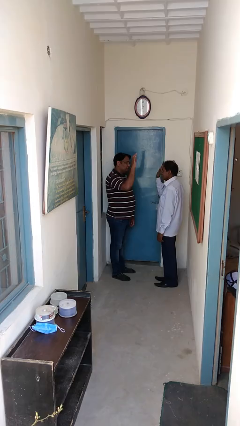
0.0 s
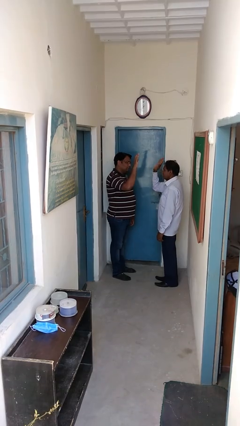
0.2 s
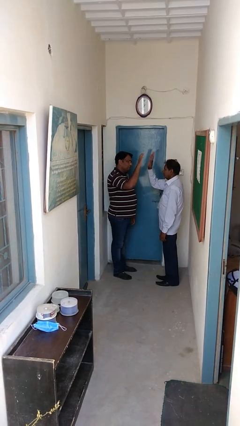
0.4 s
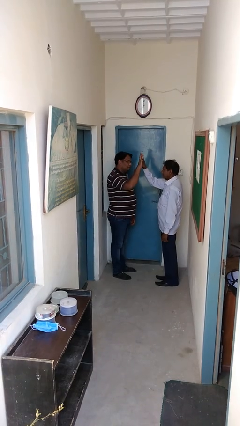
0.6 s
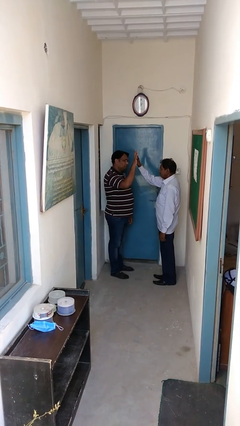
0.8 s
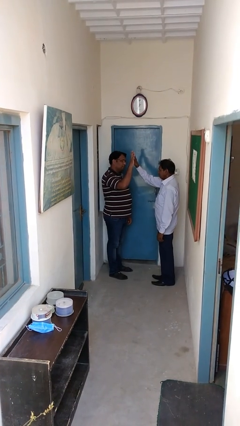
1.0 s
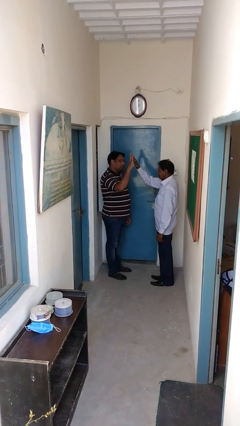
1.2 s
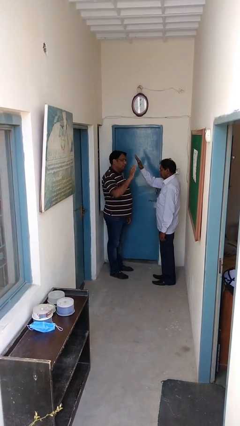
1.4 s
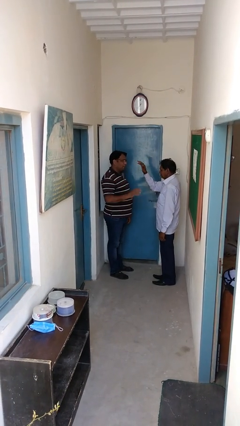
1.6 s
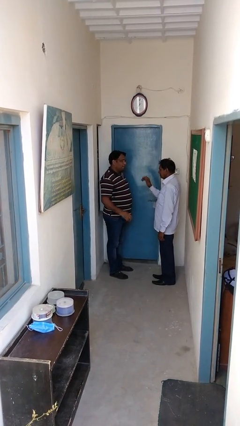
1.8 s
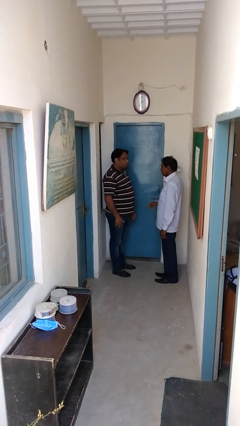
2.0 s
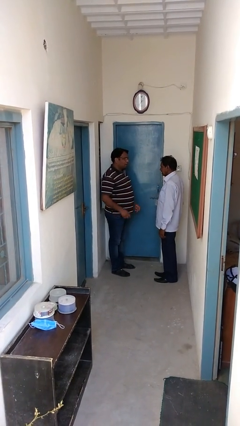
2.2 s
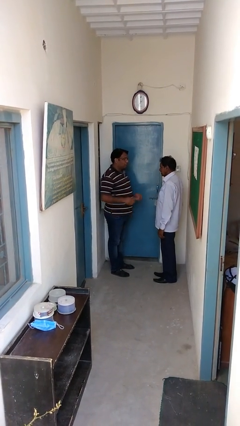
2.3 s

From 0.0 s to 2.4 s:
person highfives hand

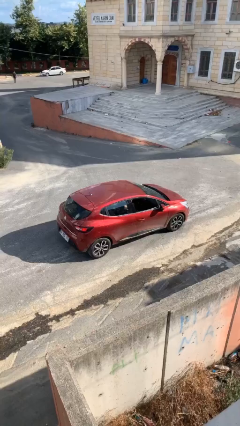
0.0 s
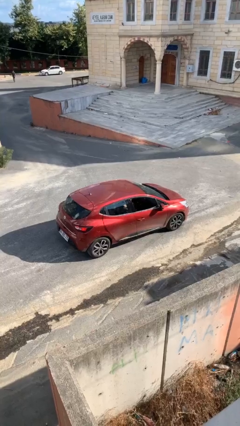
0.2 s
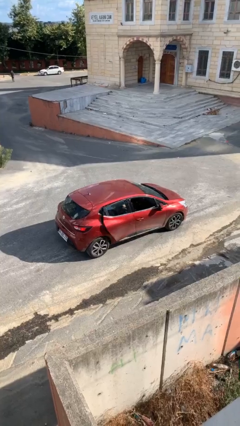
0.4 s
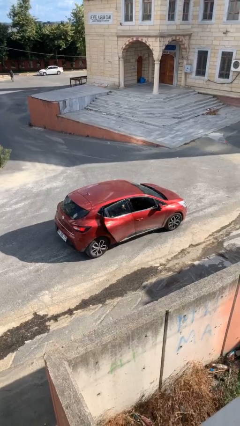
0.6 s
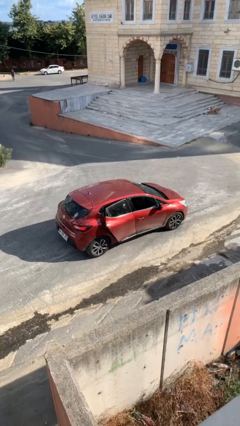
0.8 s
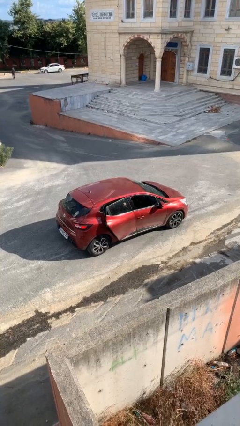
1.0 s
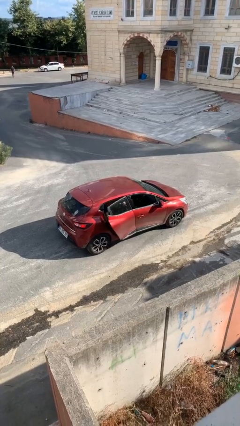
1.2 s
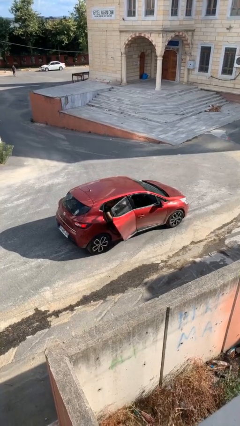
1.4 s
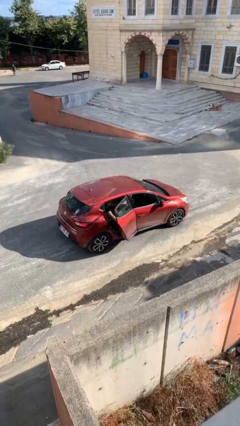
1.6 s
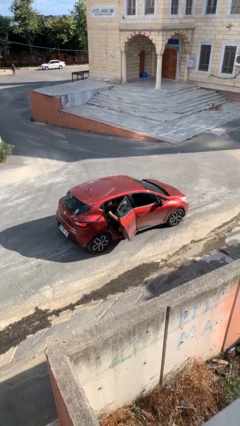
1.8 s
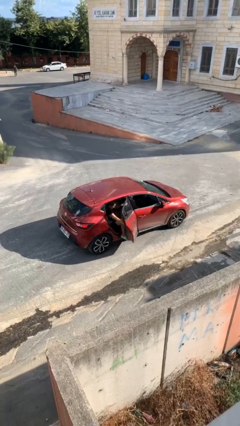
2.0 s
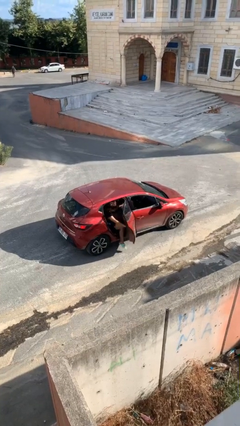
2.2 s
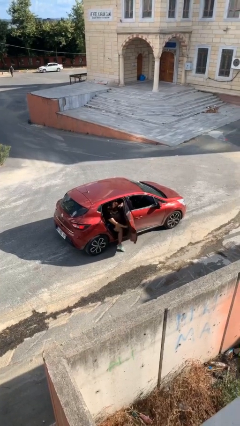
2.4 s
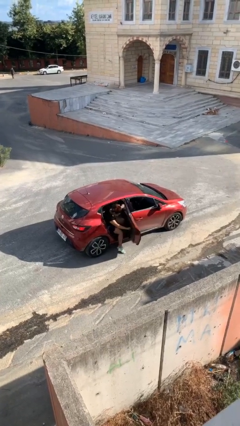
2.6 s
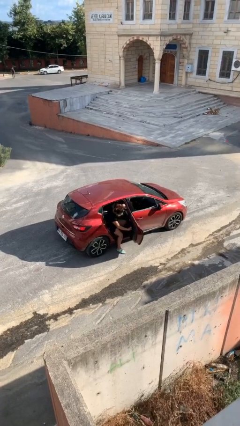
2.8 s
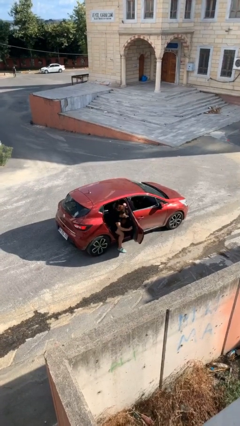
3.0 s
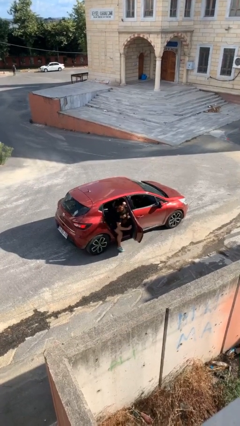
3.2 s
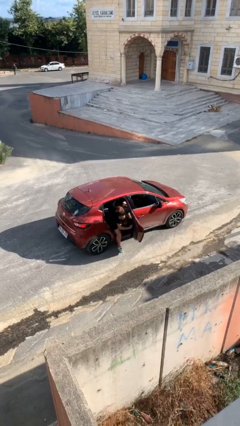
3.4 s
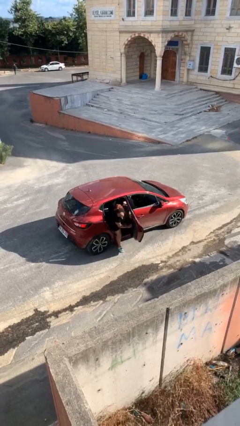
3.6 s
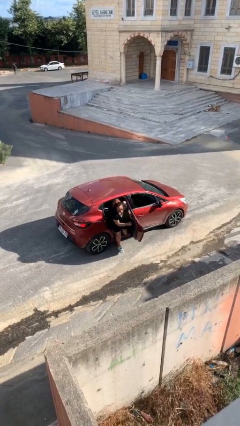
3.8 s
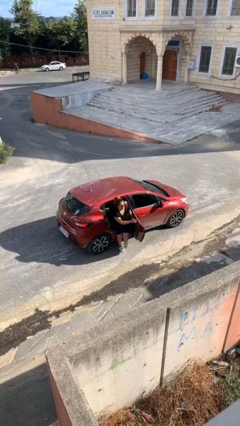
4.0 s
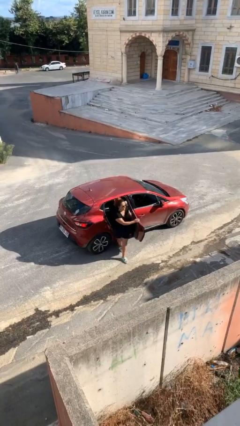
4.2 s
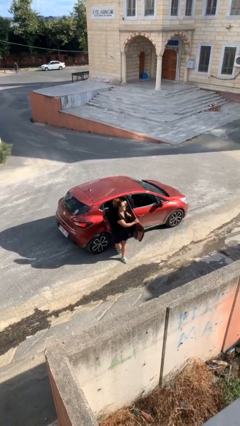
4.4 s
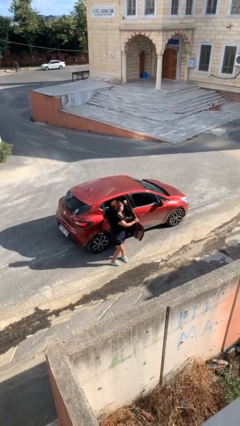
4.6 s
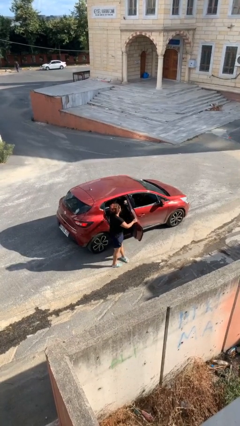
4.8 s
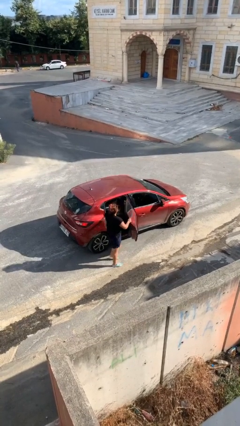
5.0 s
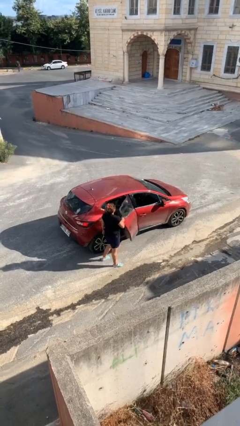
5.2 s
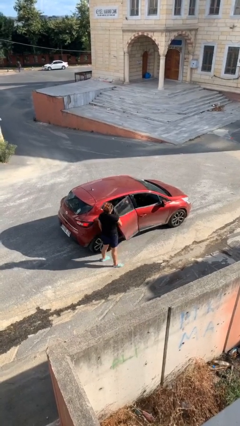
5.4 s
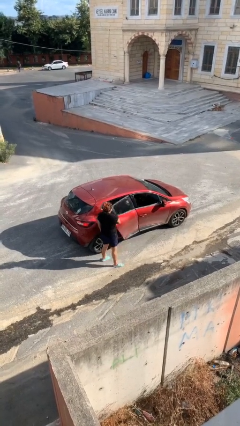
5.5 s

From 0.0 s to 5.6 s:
car drops off person

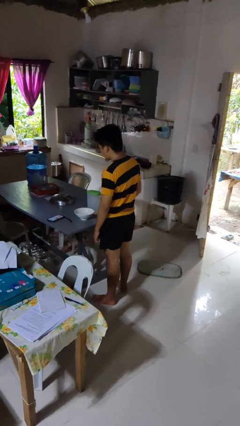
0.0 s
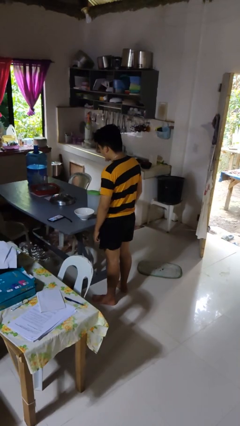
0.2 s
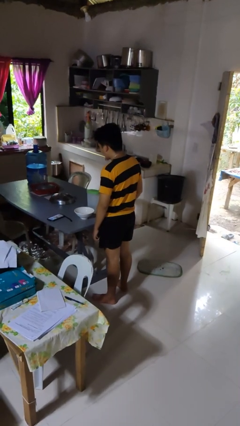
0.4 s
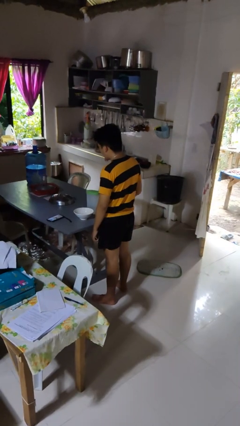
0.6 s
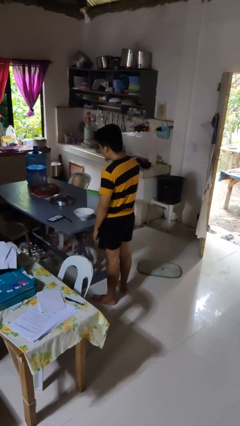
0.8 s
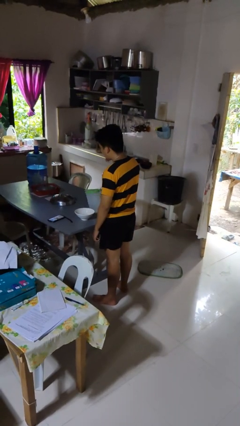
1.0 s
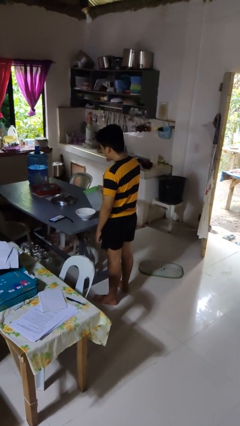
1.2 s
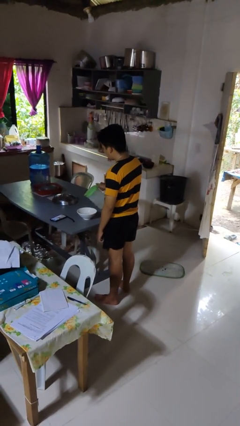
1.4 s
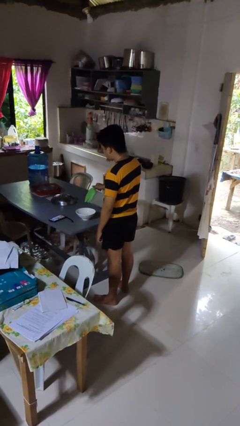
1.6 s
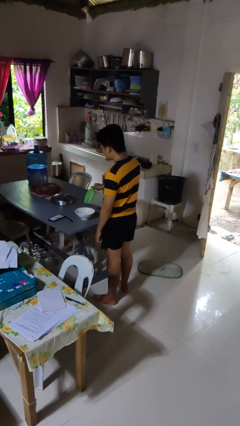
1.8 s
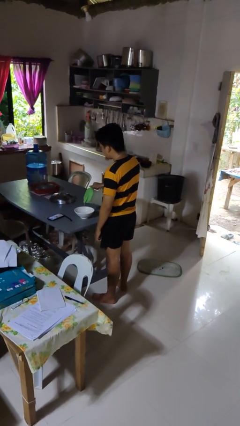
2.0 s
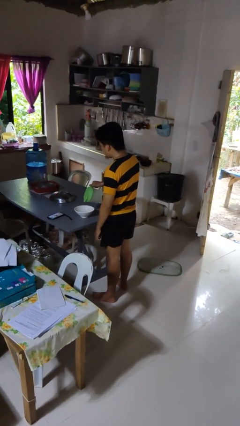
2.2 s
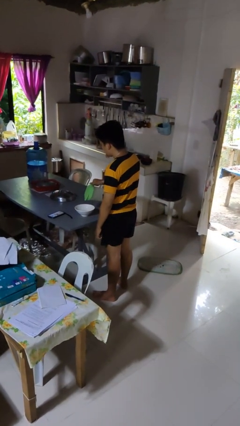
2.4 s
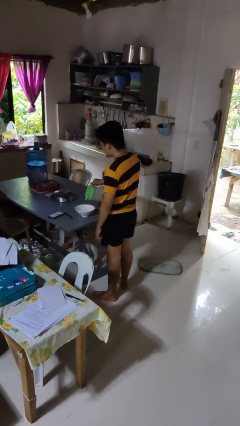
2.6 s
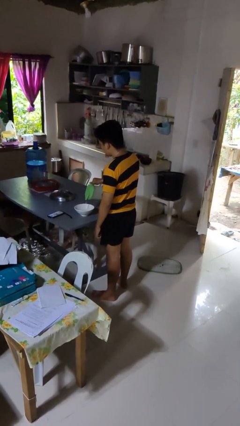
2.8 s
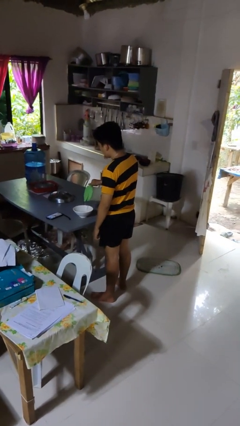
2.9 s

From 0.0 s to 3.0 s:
person pours into bowl

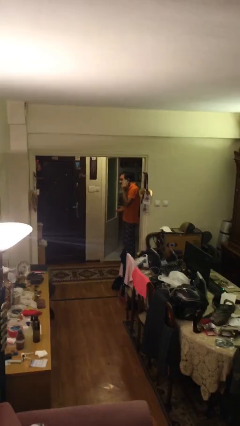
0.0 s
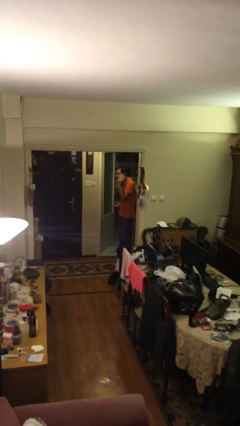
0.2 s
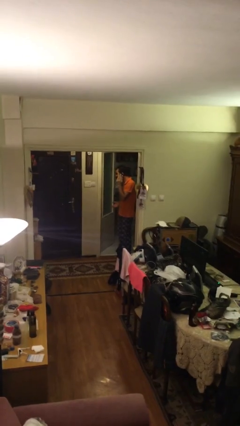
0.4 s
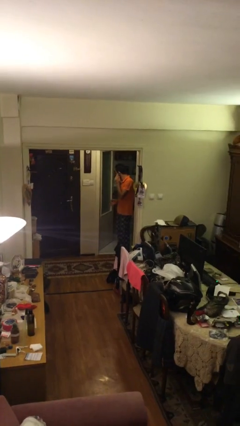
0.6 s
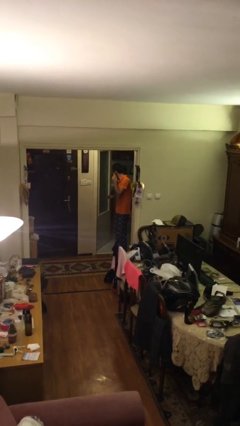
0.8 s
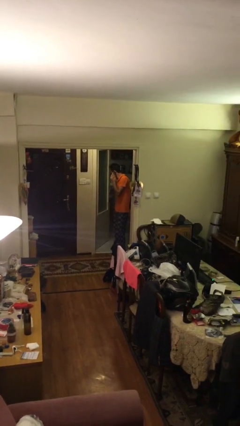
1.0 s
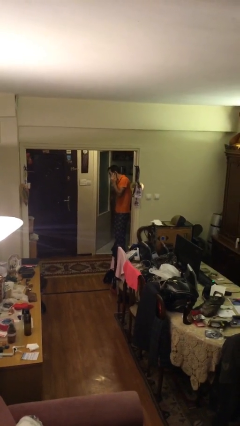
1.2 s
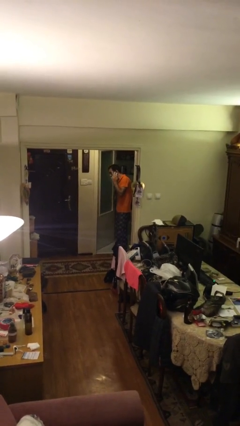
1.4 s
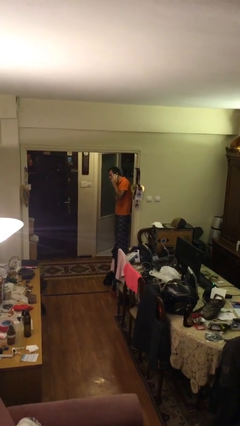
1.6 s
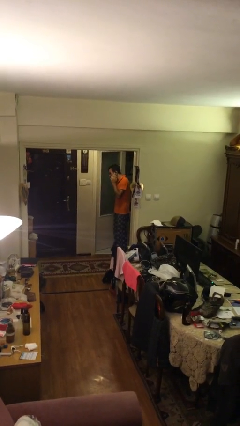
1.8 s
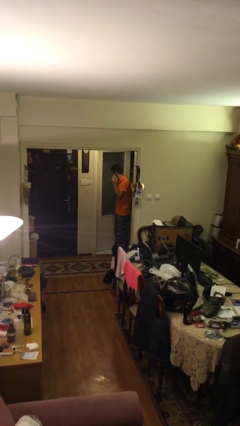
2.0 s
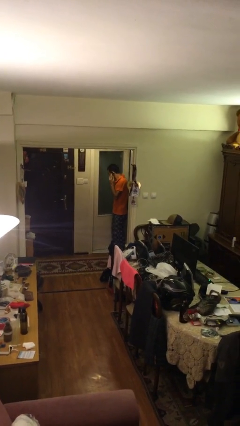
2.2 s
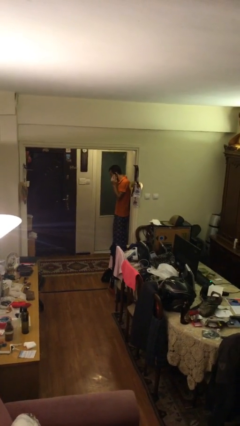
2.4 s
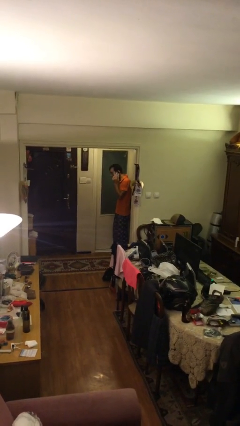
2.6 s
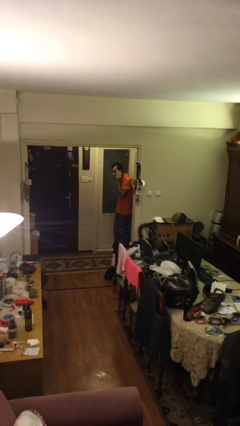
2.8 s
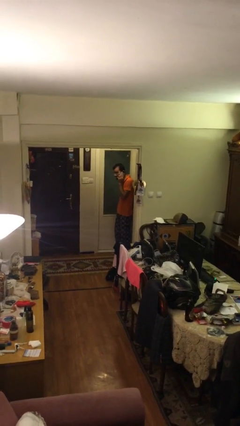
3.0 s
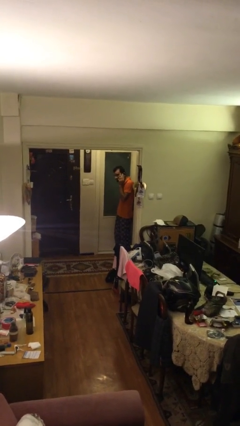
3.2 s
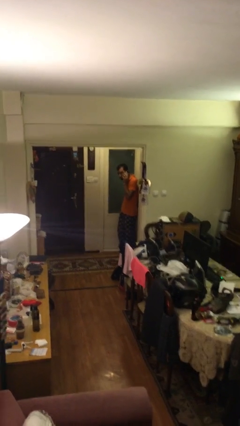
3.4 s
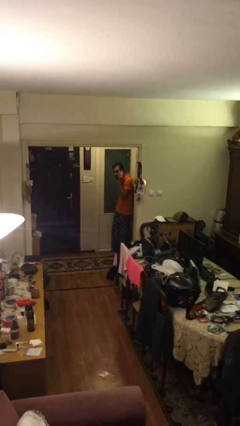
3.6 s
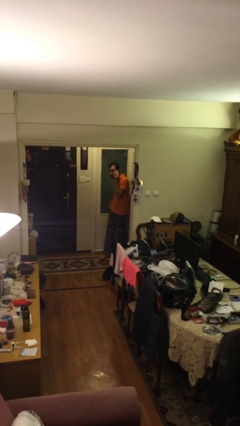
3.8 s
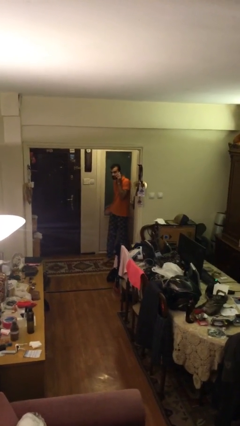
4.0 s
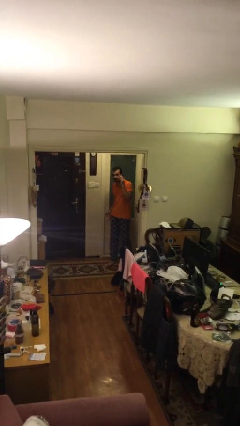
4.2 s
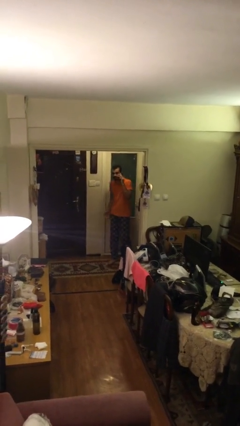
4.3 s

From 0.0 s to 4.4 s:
person closes facility door

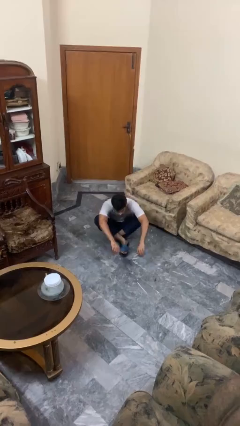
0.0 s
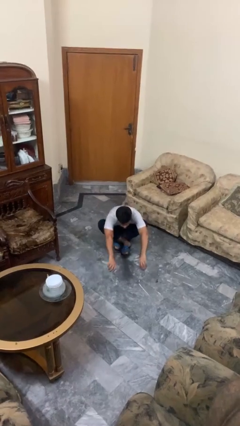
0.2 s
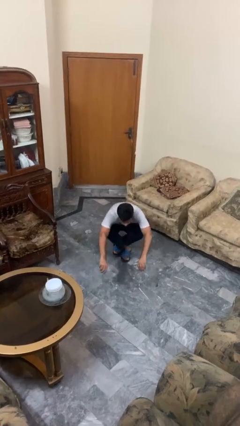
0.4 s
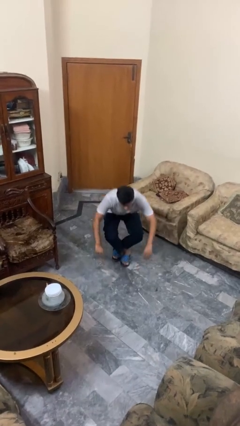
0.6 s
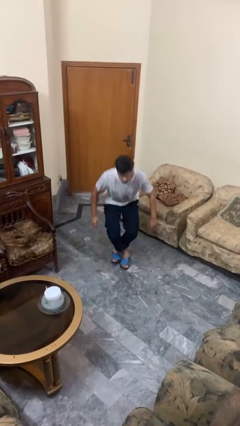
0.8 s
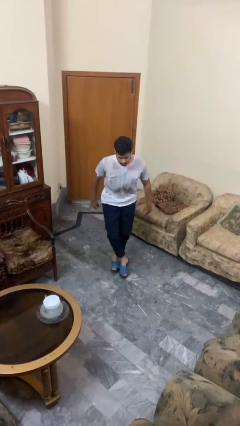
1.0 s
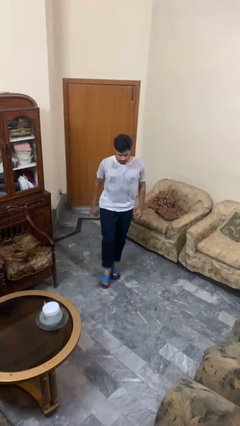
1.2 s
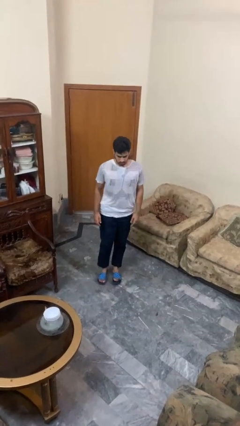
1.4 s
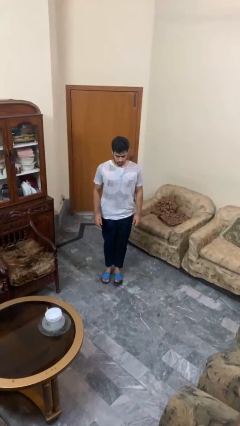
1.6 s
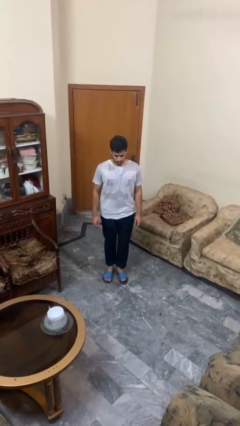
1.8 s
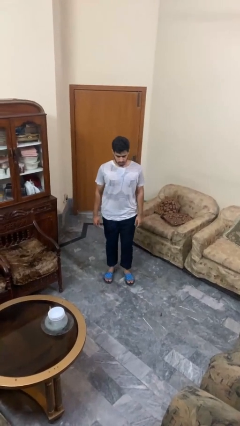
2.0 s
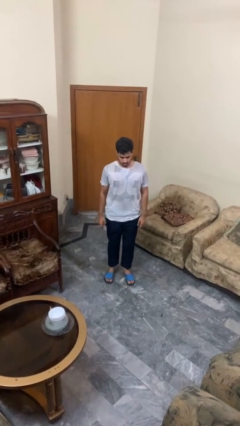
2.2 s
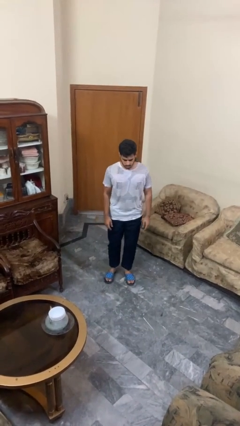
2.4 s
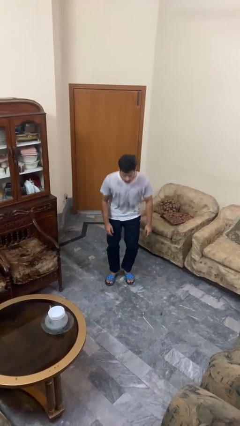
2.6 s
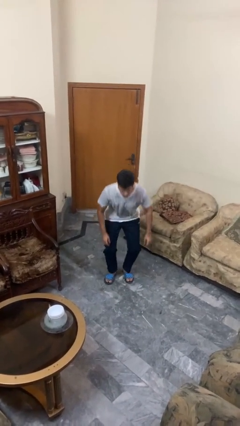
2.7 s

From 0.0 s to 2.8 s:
person stands up from floor
